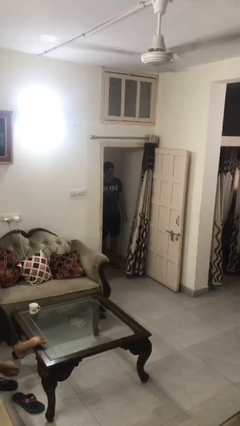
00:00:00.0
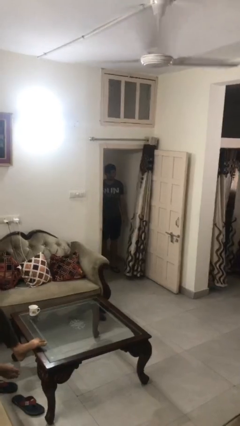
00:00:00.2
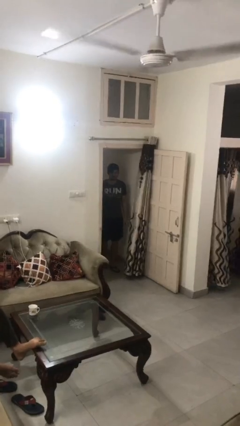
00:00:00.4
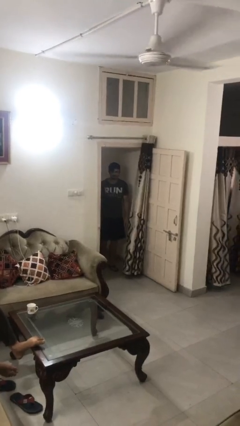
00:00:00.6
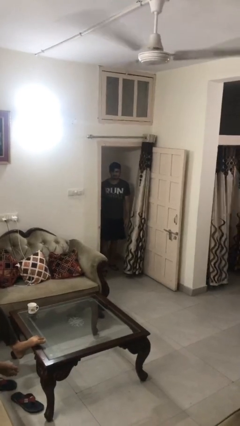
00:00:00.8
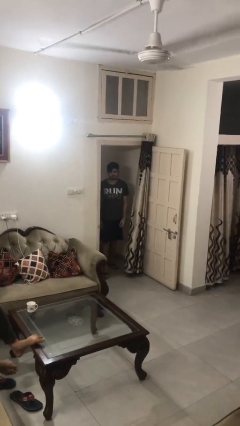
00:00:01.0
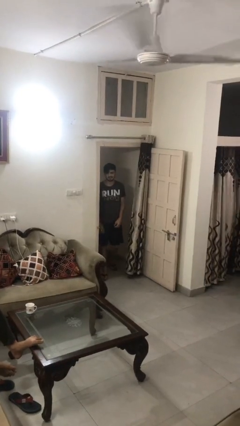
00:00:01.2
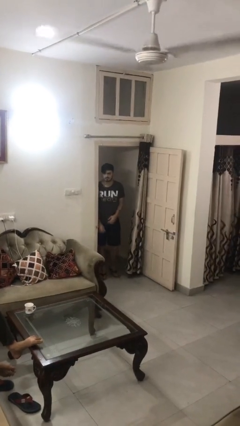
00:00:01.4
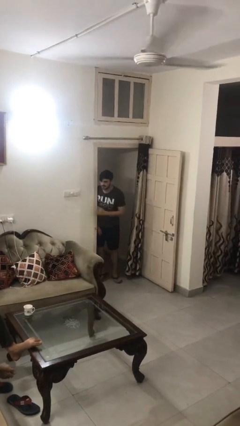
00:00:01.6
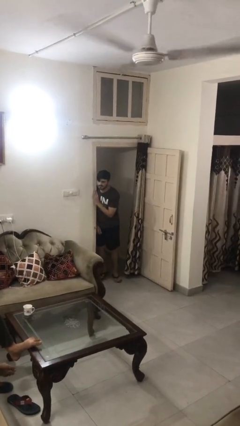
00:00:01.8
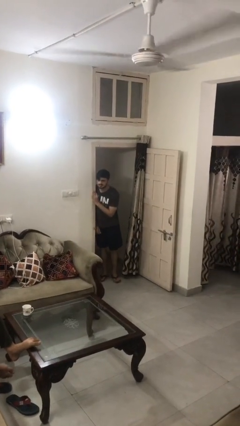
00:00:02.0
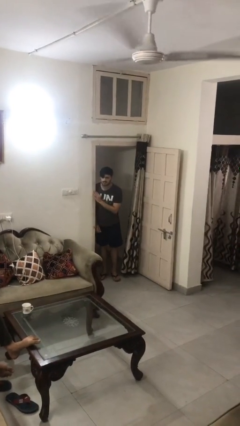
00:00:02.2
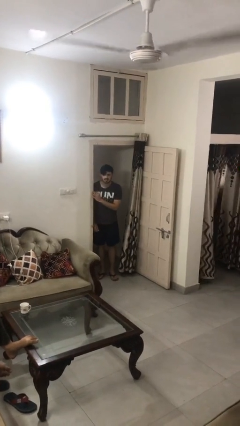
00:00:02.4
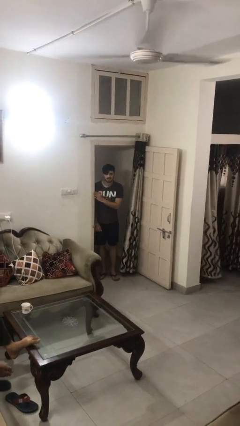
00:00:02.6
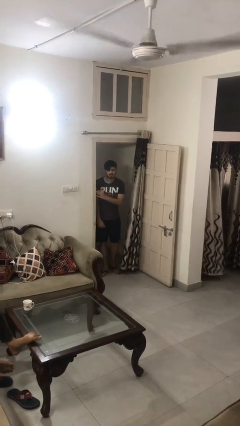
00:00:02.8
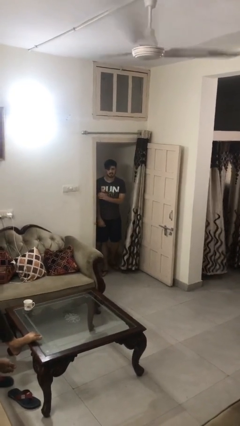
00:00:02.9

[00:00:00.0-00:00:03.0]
person bumps into wall

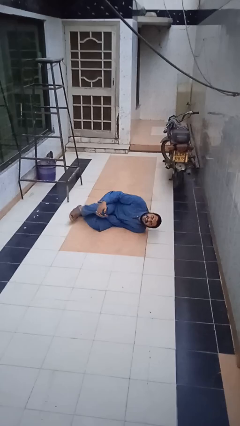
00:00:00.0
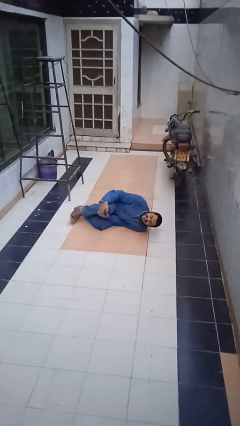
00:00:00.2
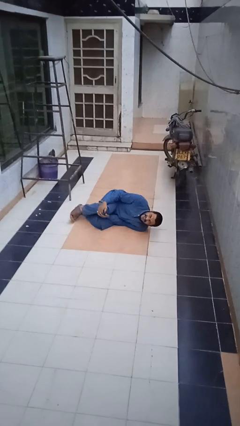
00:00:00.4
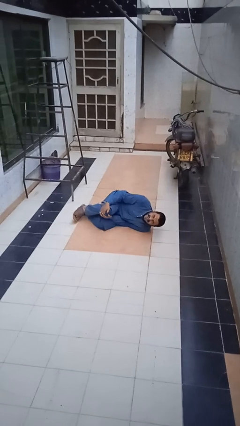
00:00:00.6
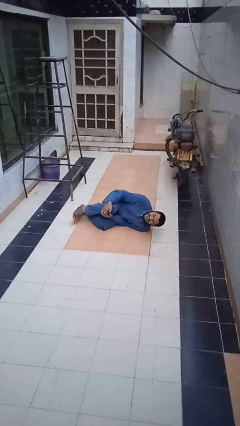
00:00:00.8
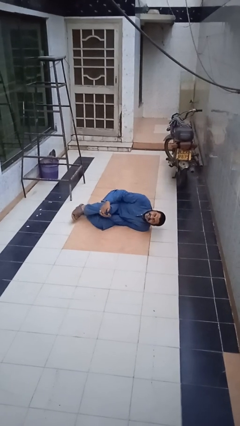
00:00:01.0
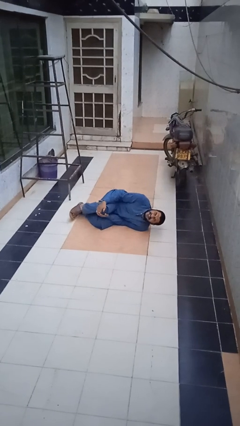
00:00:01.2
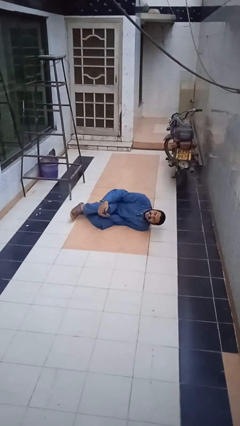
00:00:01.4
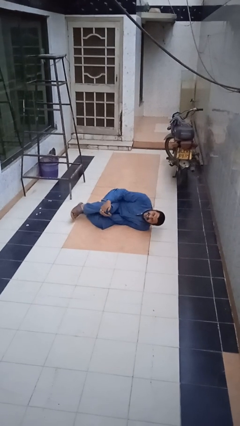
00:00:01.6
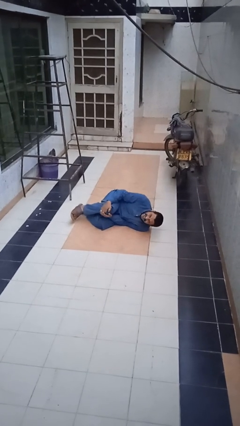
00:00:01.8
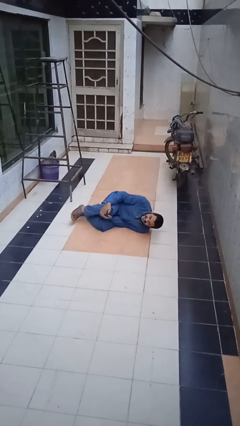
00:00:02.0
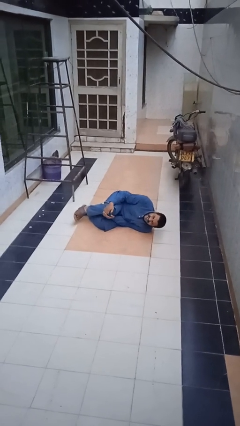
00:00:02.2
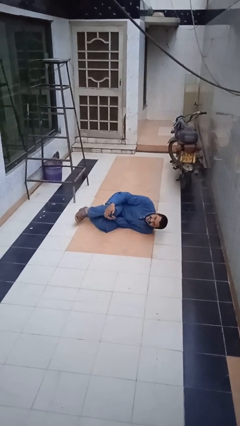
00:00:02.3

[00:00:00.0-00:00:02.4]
person lies down on floor

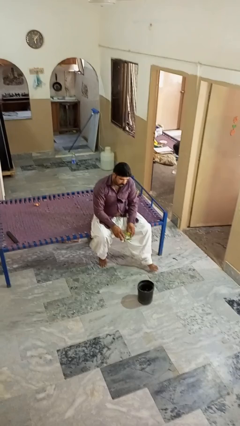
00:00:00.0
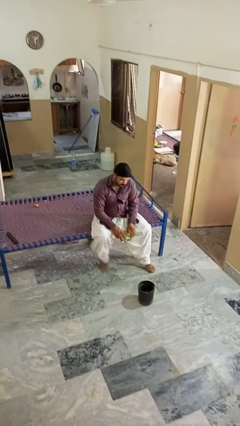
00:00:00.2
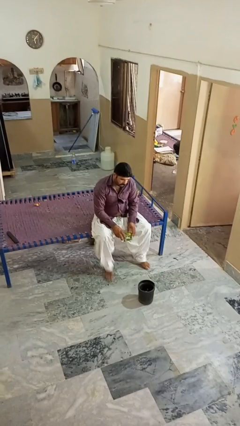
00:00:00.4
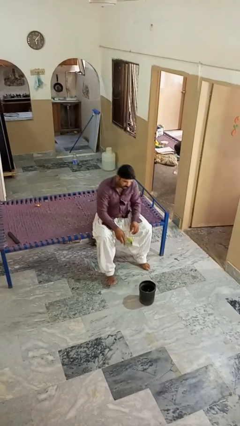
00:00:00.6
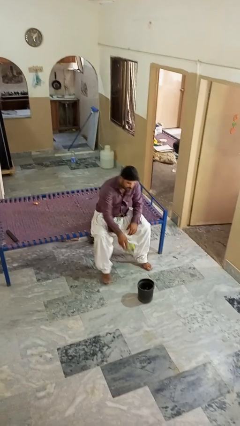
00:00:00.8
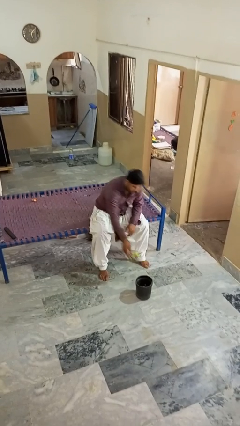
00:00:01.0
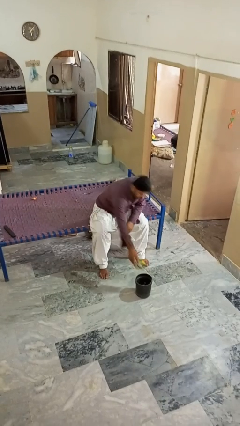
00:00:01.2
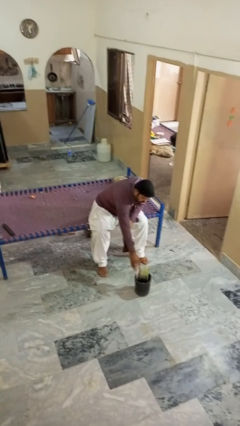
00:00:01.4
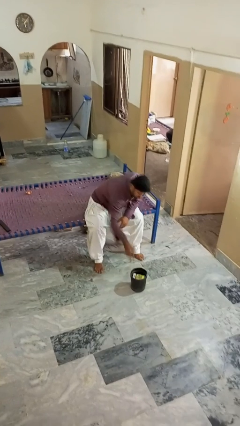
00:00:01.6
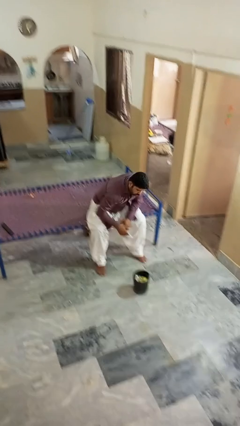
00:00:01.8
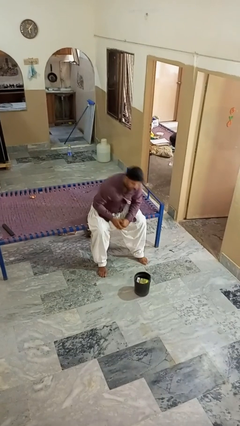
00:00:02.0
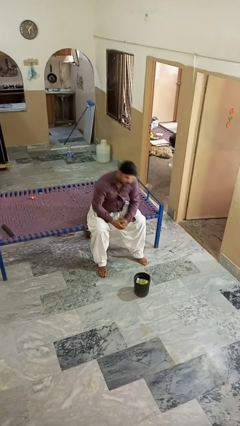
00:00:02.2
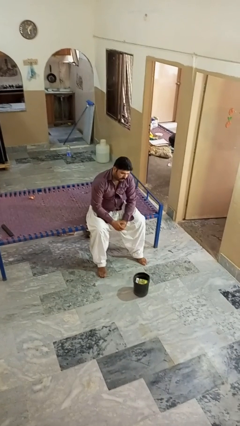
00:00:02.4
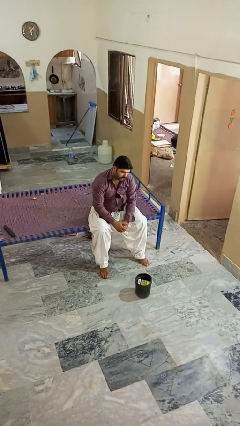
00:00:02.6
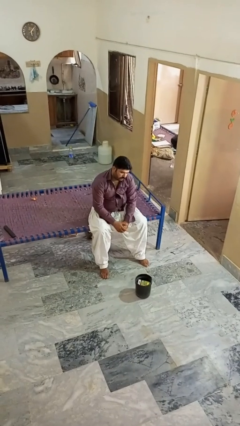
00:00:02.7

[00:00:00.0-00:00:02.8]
person puts object into basket

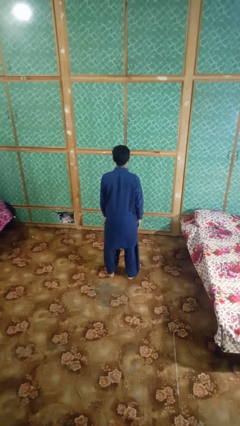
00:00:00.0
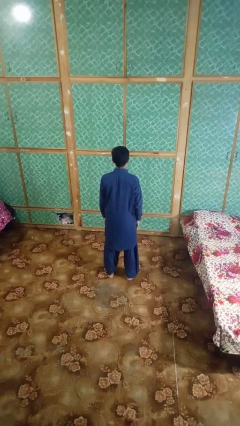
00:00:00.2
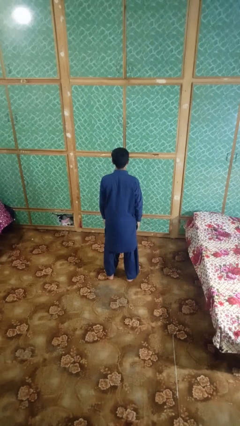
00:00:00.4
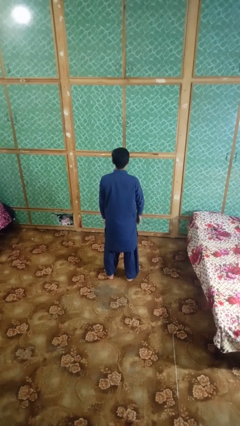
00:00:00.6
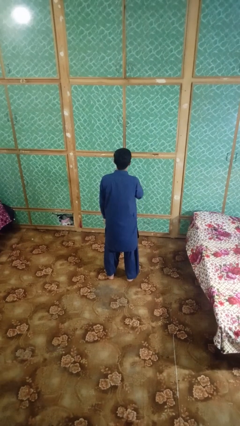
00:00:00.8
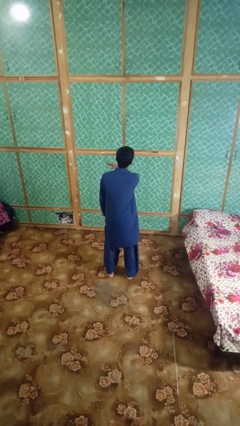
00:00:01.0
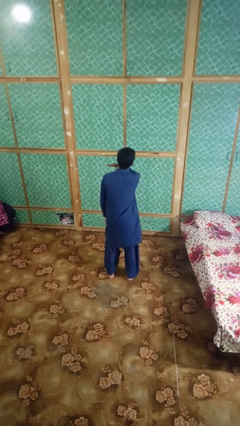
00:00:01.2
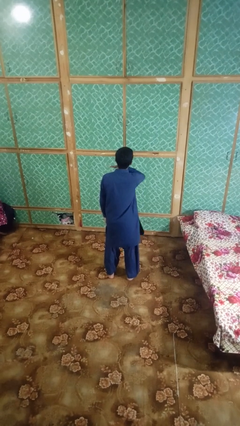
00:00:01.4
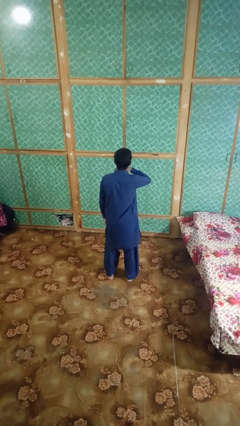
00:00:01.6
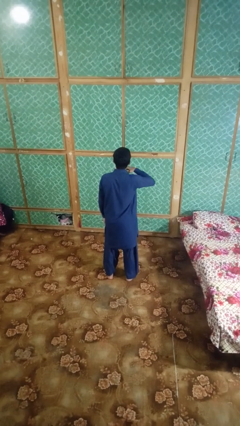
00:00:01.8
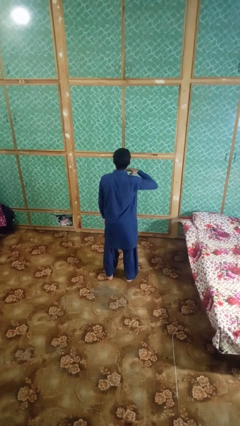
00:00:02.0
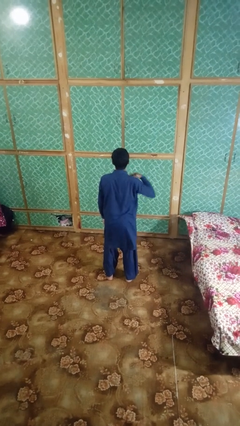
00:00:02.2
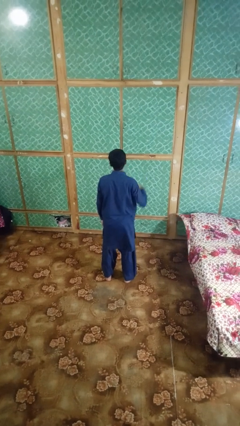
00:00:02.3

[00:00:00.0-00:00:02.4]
person gestures cut

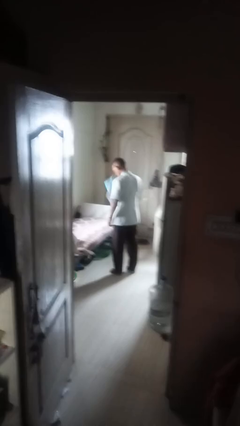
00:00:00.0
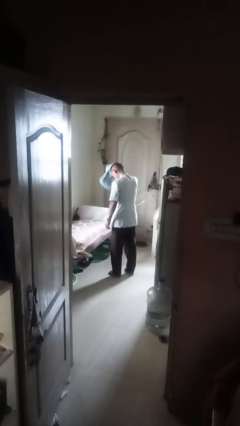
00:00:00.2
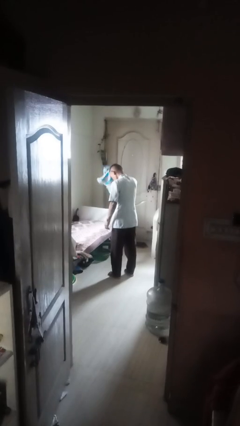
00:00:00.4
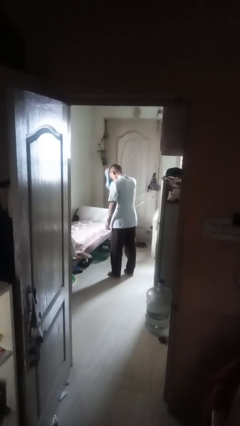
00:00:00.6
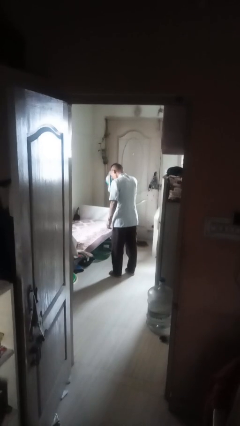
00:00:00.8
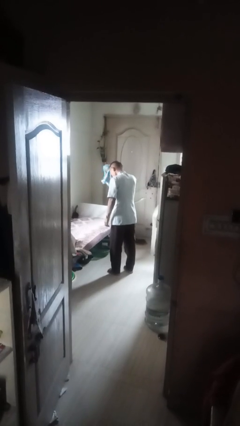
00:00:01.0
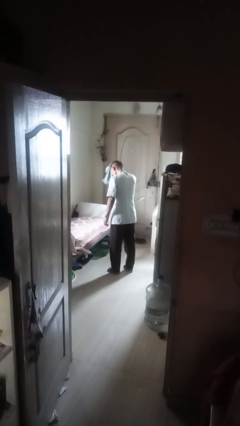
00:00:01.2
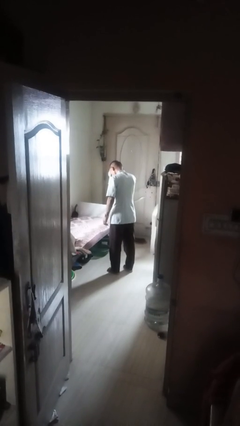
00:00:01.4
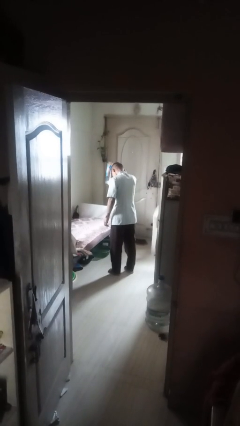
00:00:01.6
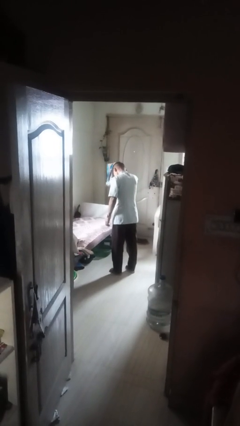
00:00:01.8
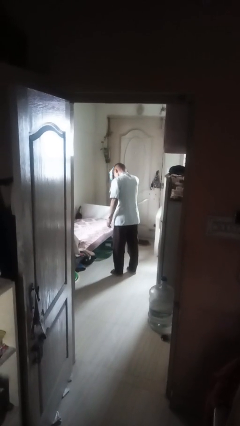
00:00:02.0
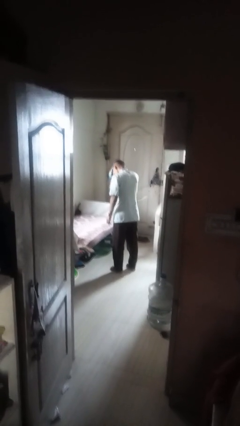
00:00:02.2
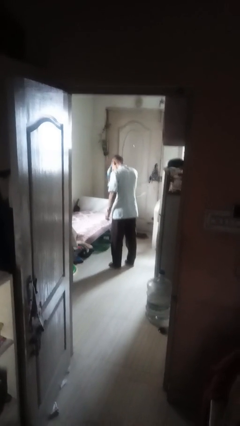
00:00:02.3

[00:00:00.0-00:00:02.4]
person dries hair with towel

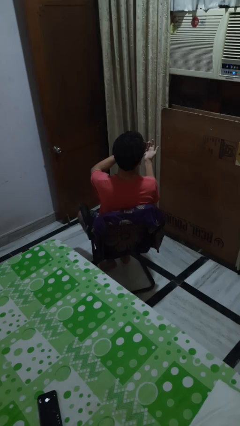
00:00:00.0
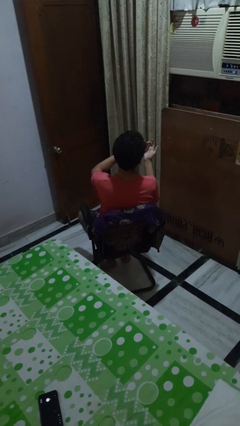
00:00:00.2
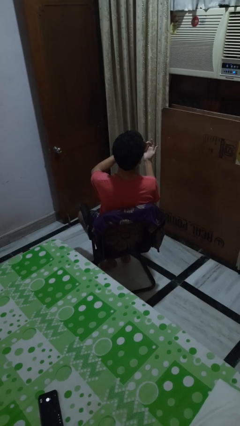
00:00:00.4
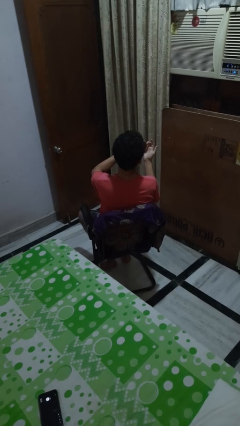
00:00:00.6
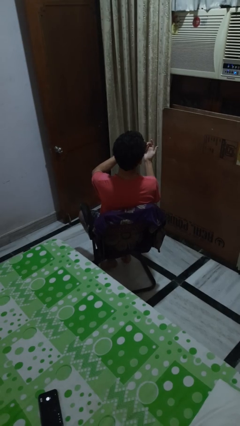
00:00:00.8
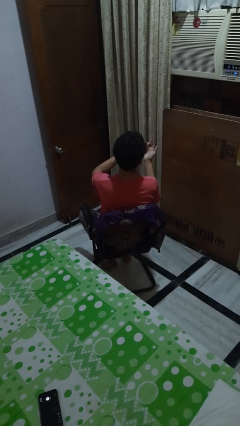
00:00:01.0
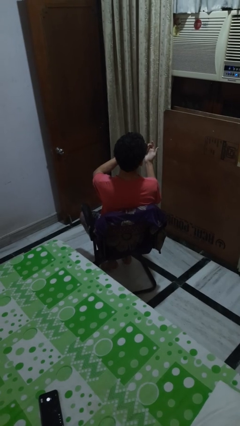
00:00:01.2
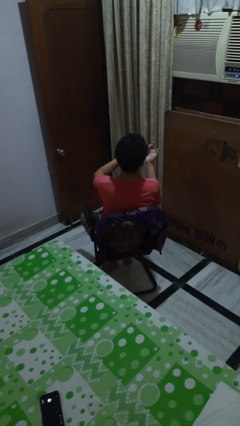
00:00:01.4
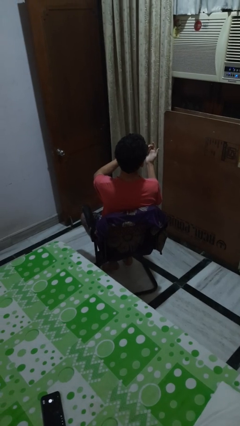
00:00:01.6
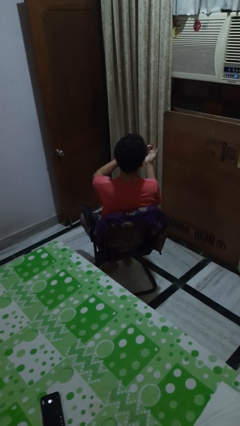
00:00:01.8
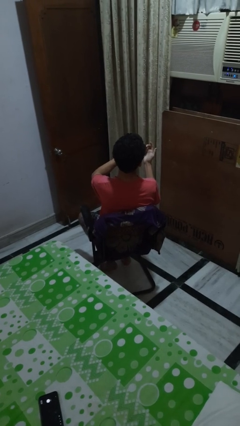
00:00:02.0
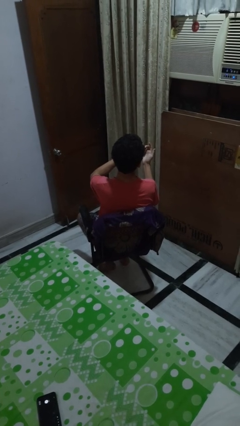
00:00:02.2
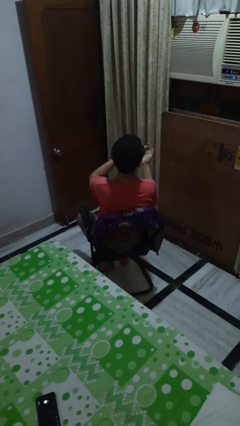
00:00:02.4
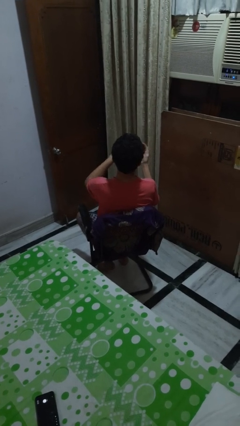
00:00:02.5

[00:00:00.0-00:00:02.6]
person clips fingernails

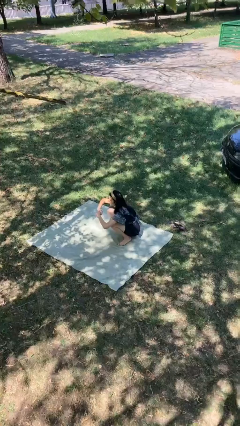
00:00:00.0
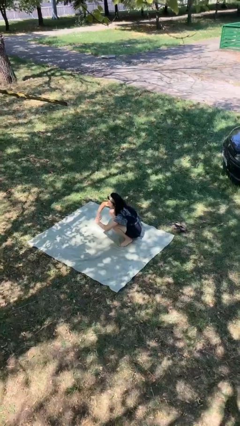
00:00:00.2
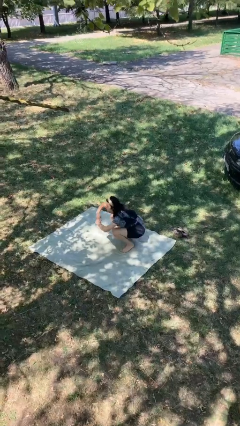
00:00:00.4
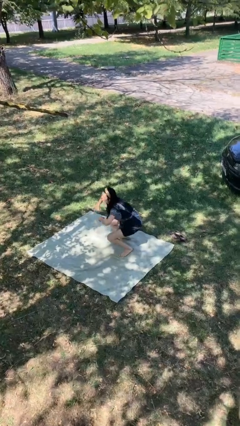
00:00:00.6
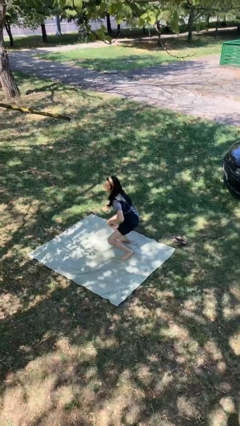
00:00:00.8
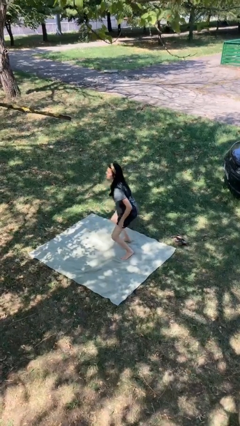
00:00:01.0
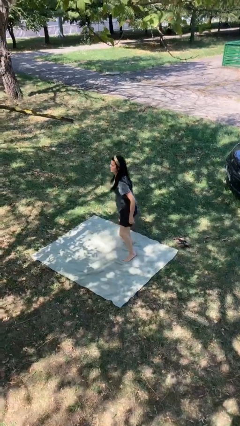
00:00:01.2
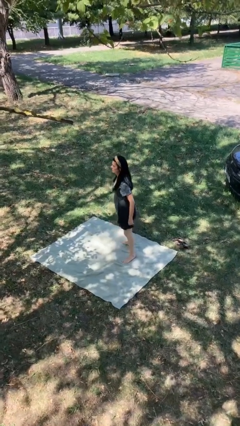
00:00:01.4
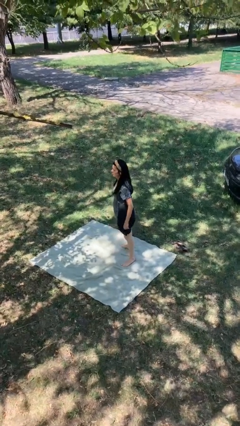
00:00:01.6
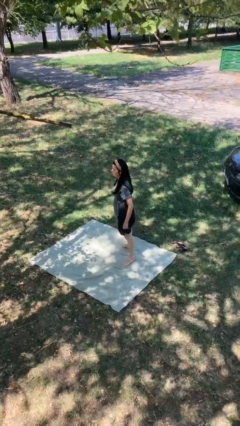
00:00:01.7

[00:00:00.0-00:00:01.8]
person stands up
